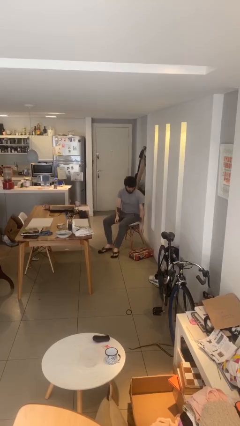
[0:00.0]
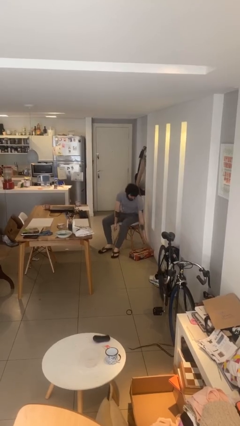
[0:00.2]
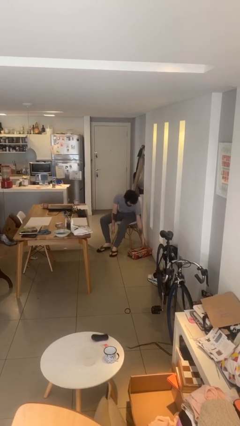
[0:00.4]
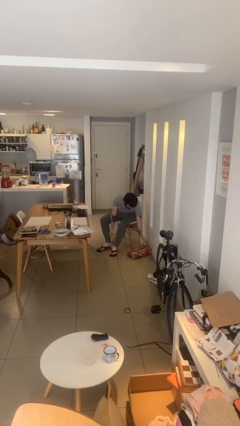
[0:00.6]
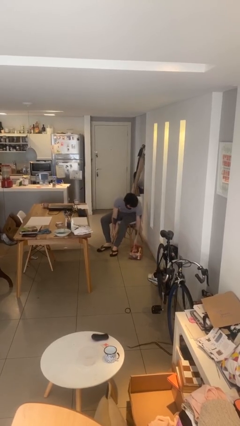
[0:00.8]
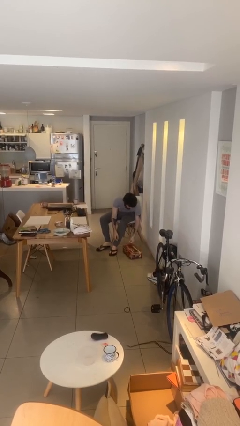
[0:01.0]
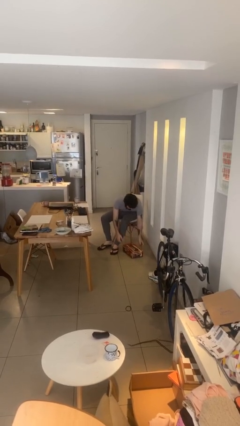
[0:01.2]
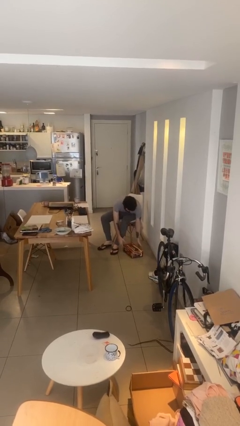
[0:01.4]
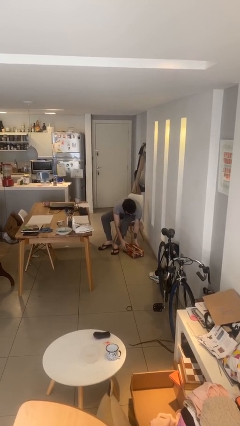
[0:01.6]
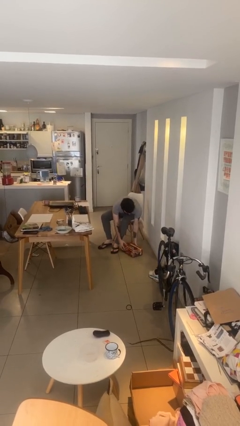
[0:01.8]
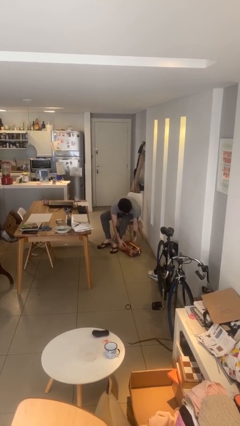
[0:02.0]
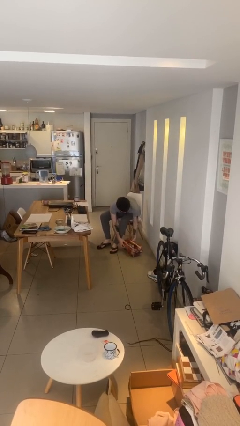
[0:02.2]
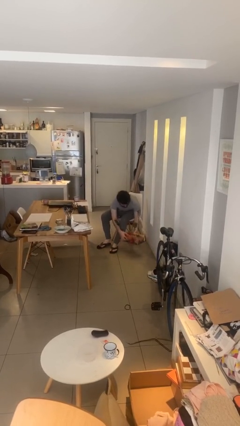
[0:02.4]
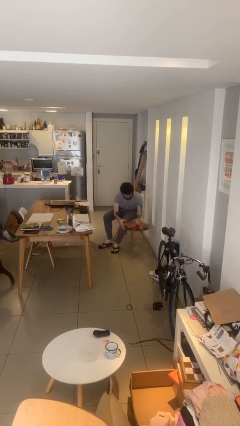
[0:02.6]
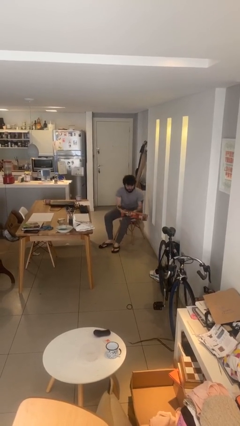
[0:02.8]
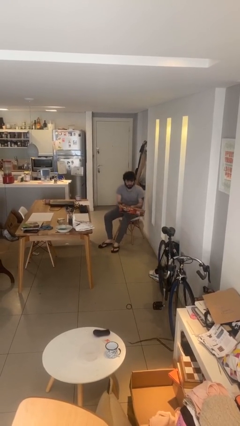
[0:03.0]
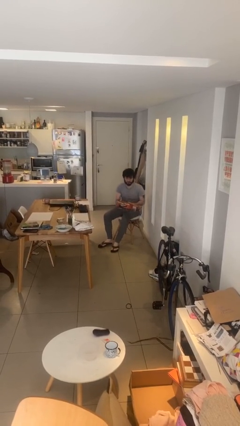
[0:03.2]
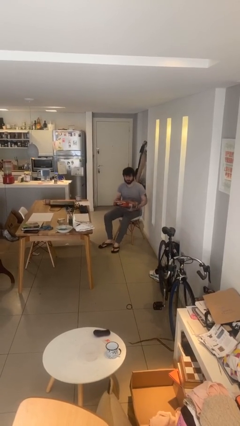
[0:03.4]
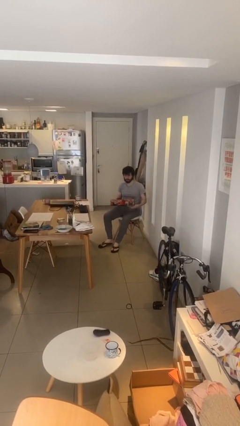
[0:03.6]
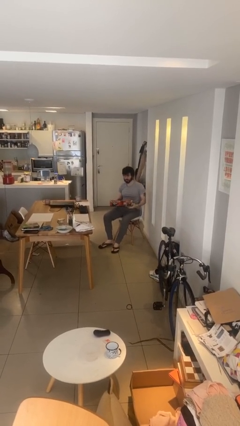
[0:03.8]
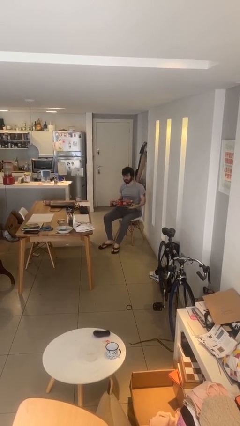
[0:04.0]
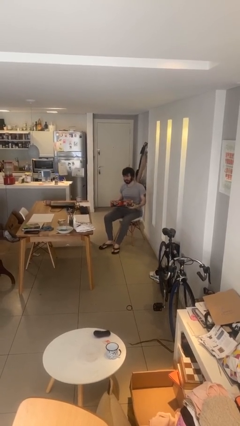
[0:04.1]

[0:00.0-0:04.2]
person picks up object from floor

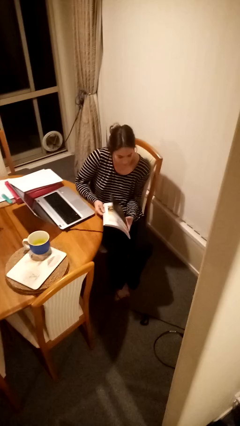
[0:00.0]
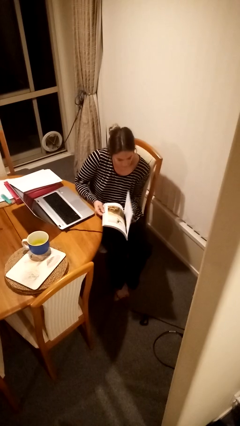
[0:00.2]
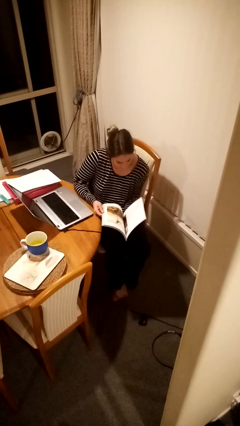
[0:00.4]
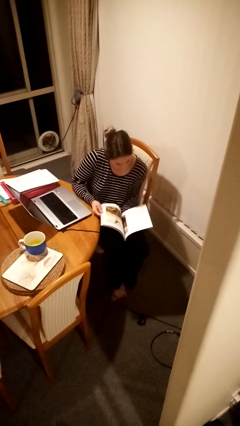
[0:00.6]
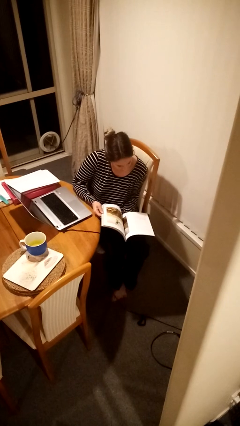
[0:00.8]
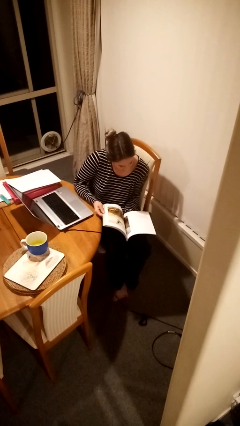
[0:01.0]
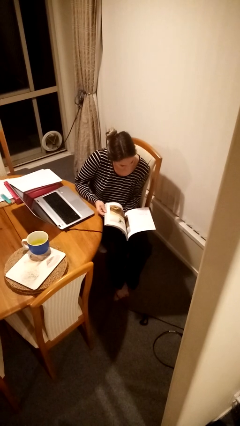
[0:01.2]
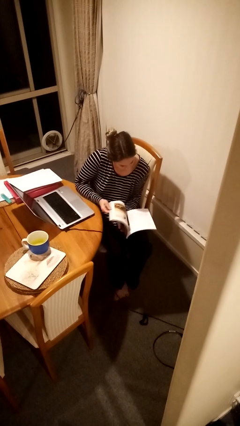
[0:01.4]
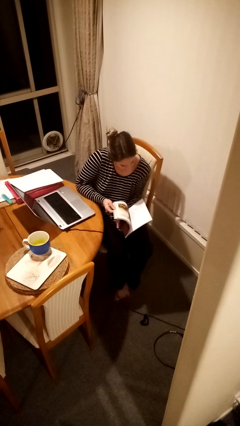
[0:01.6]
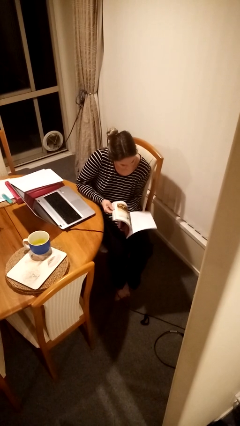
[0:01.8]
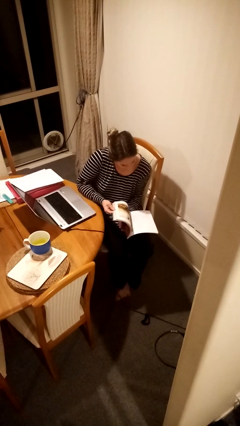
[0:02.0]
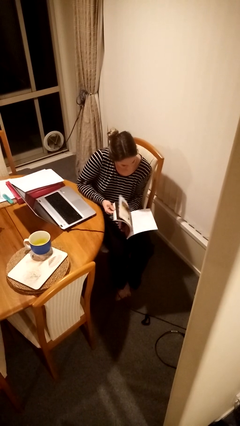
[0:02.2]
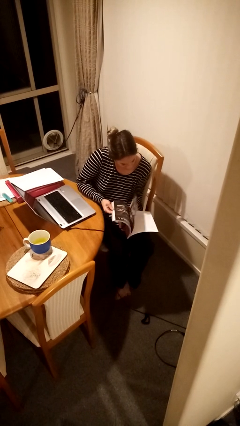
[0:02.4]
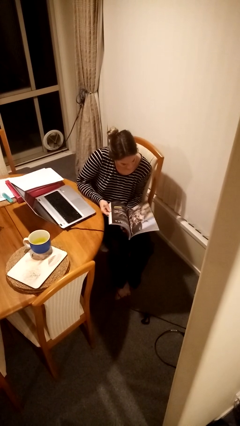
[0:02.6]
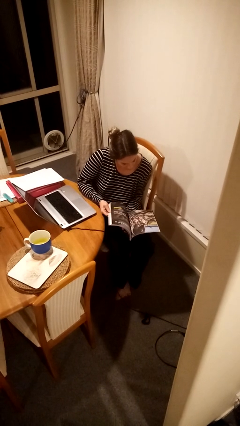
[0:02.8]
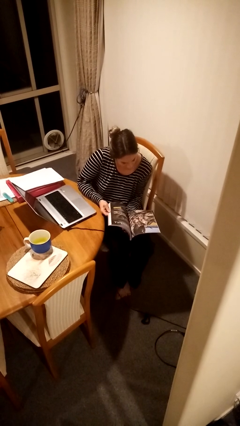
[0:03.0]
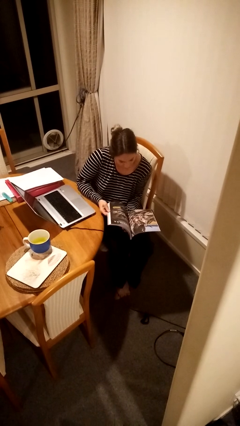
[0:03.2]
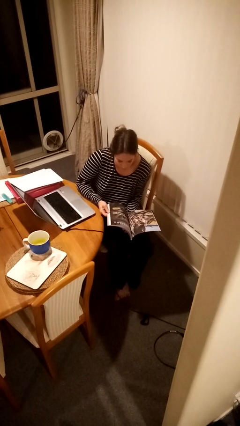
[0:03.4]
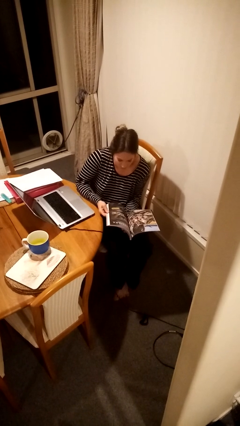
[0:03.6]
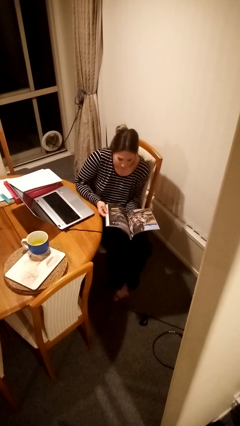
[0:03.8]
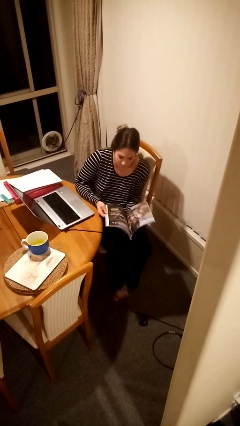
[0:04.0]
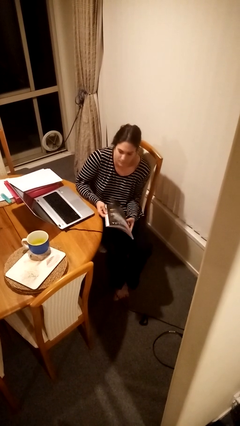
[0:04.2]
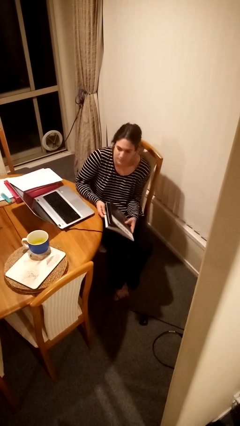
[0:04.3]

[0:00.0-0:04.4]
person reads magazine

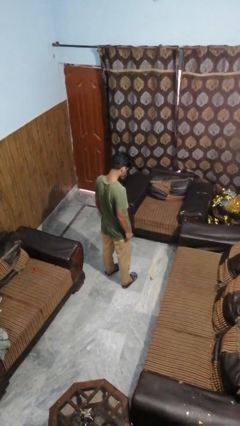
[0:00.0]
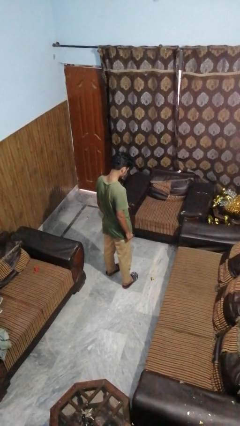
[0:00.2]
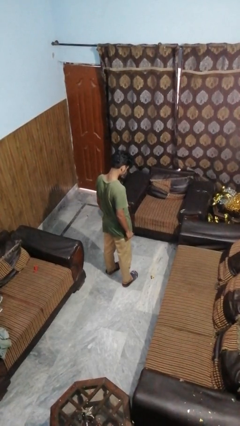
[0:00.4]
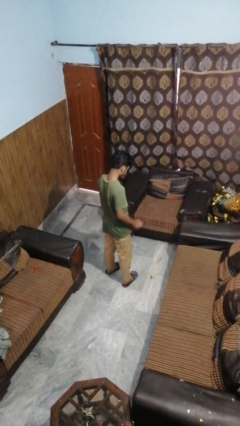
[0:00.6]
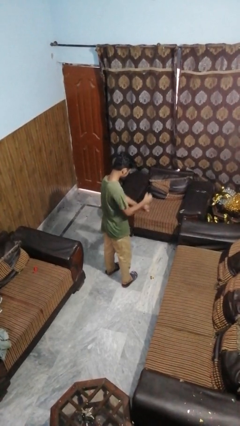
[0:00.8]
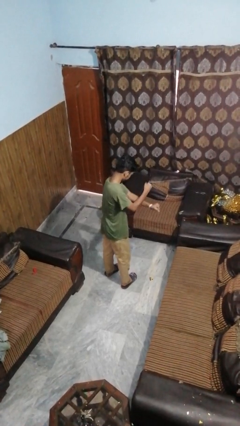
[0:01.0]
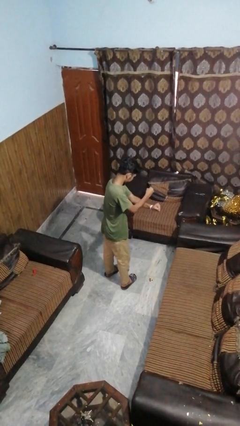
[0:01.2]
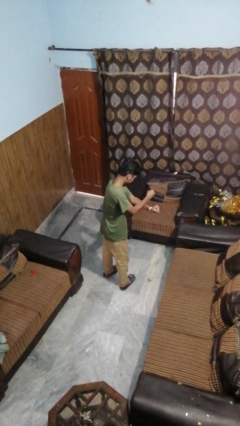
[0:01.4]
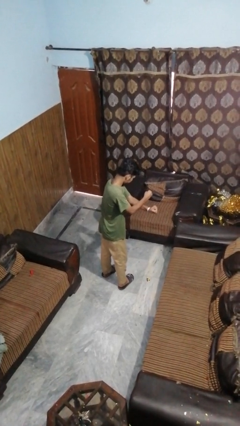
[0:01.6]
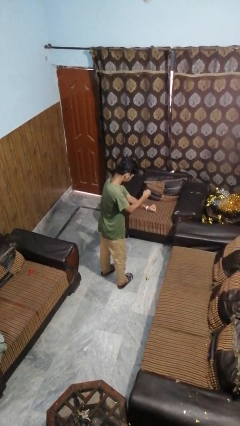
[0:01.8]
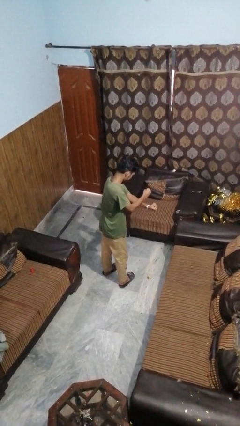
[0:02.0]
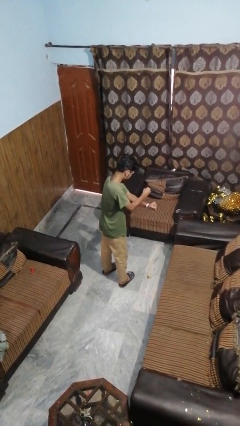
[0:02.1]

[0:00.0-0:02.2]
person gestures arms x

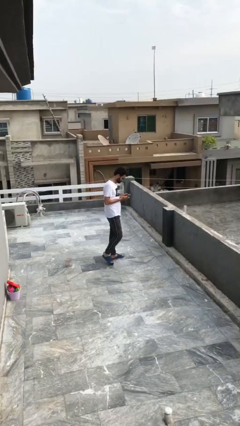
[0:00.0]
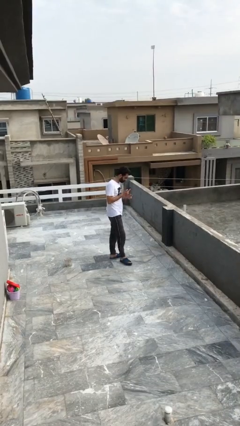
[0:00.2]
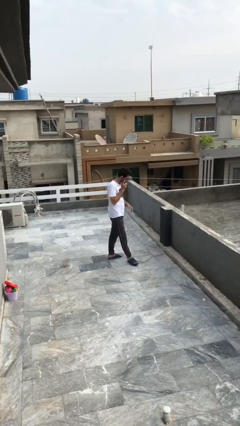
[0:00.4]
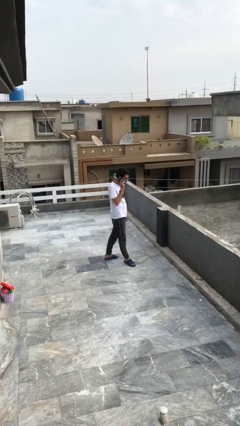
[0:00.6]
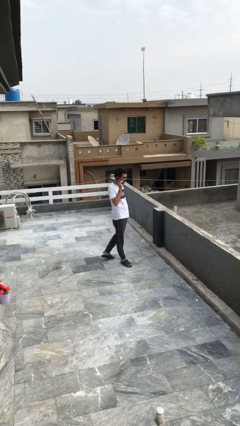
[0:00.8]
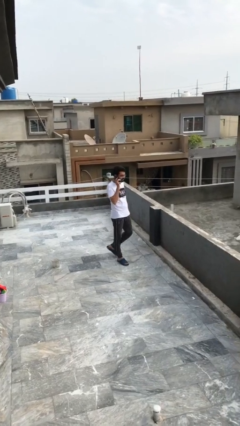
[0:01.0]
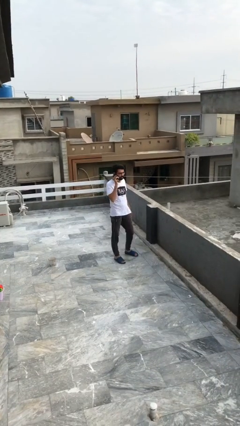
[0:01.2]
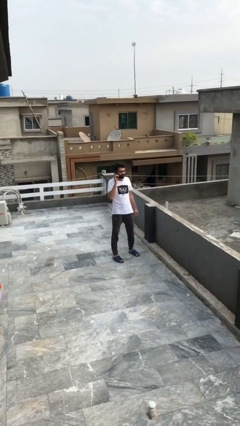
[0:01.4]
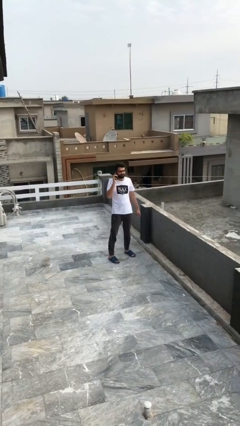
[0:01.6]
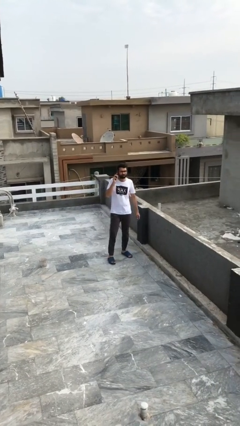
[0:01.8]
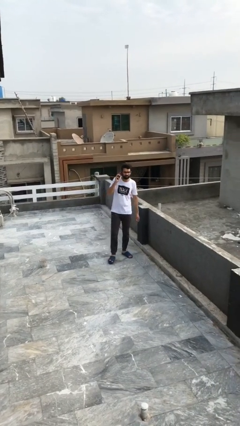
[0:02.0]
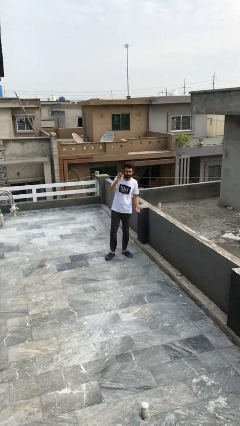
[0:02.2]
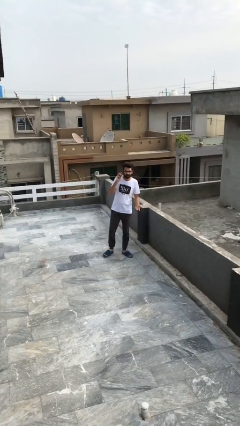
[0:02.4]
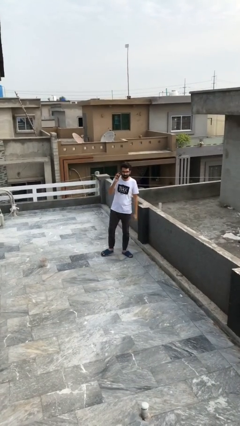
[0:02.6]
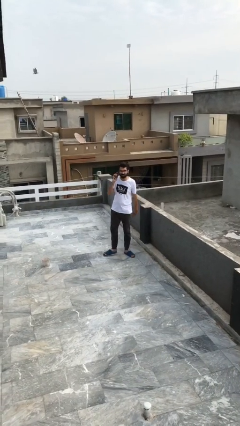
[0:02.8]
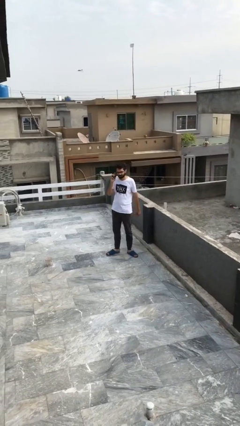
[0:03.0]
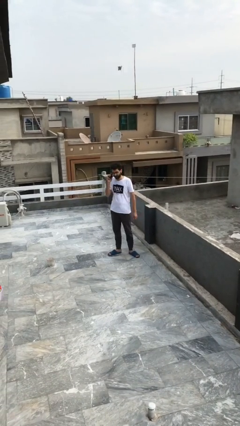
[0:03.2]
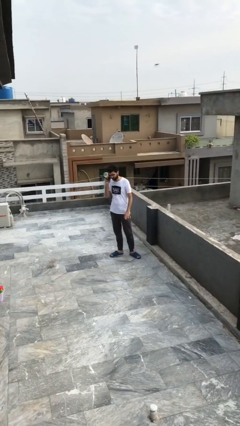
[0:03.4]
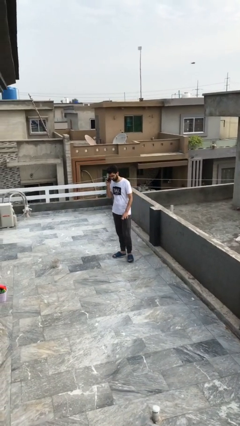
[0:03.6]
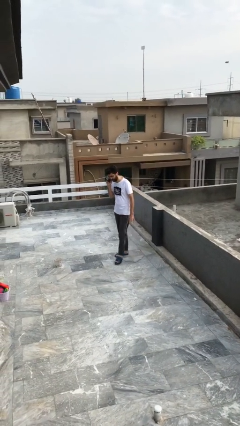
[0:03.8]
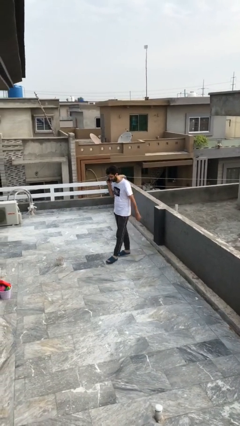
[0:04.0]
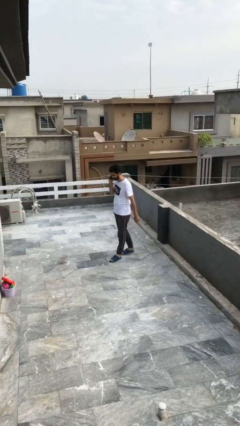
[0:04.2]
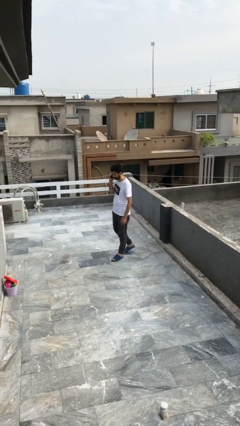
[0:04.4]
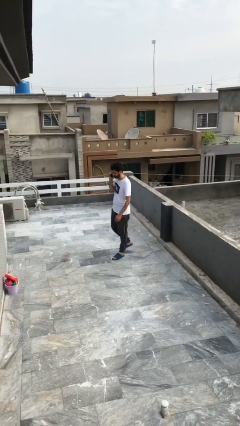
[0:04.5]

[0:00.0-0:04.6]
person talks on phone

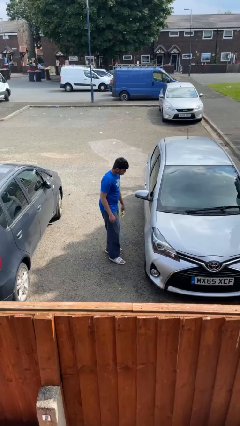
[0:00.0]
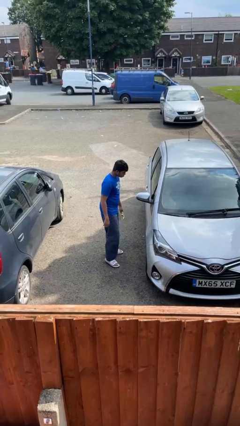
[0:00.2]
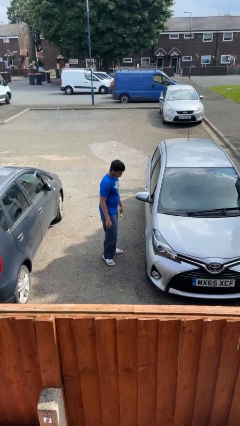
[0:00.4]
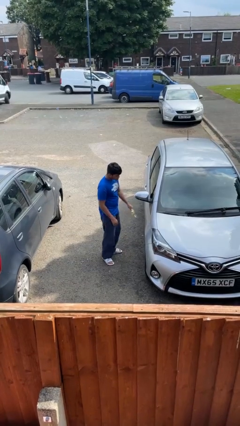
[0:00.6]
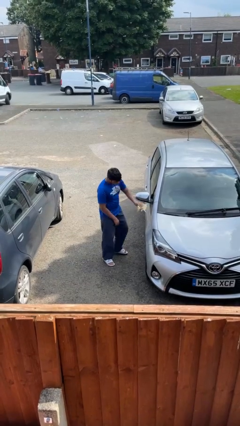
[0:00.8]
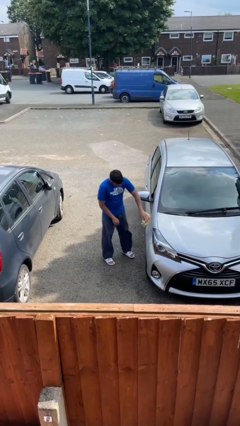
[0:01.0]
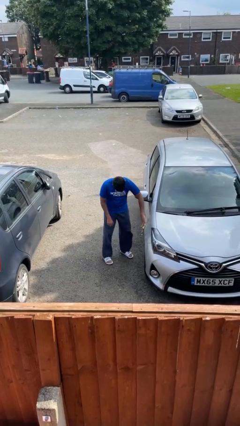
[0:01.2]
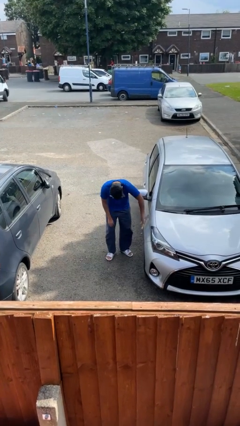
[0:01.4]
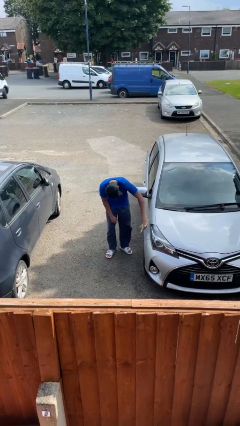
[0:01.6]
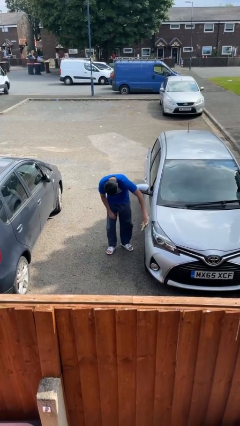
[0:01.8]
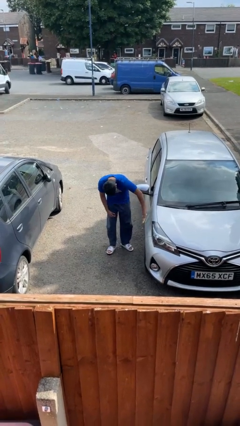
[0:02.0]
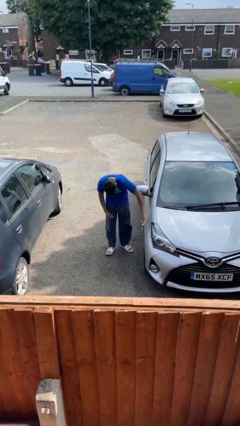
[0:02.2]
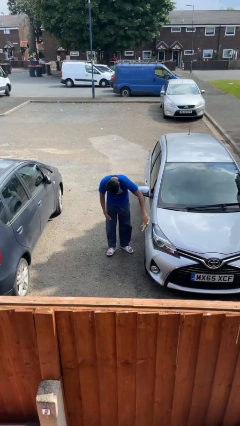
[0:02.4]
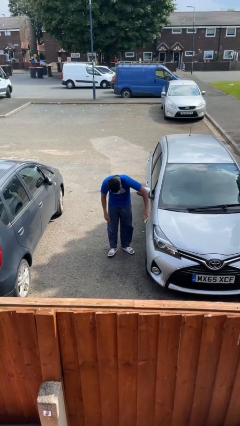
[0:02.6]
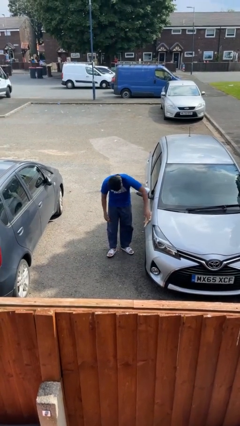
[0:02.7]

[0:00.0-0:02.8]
person polishes car with rag
